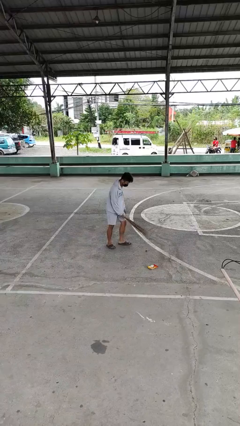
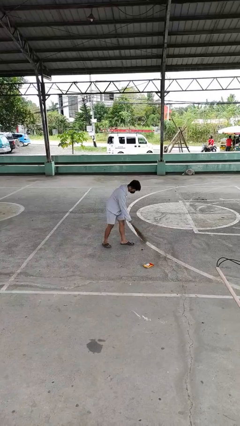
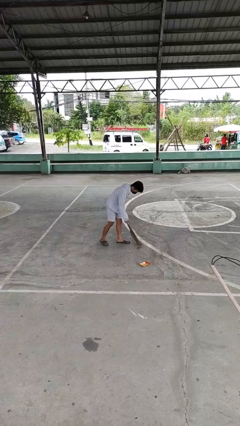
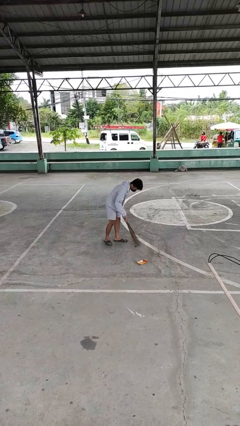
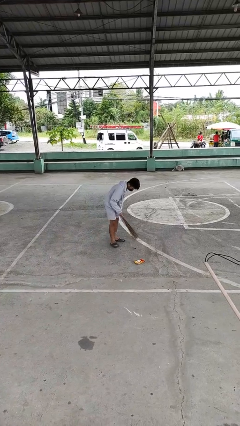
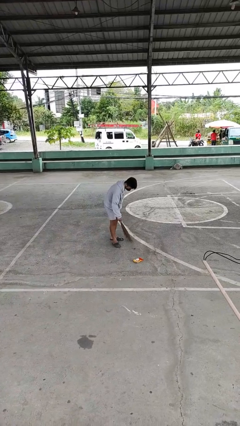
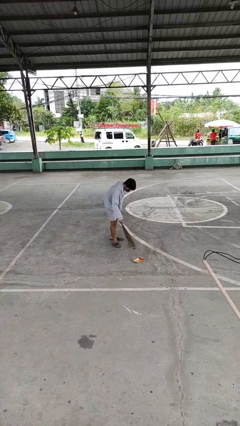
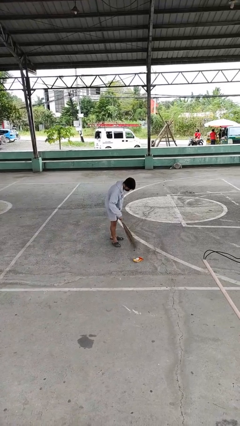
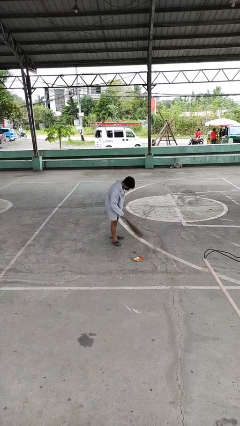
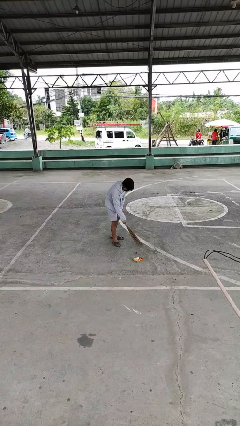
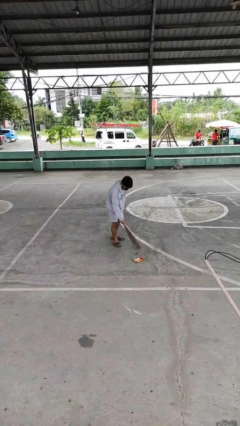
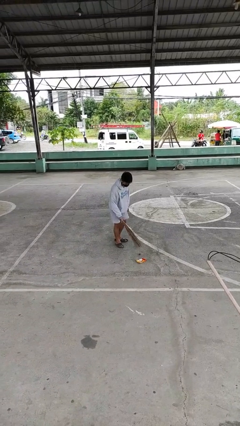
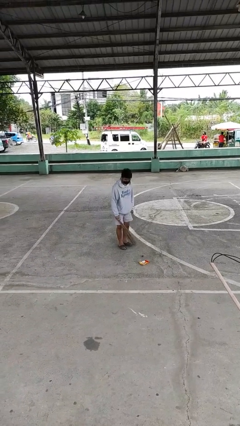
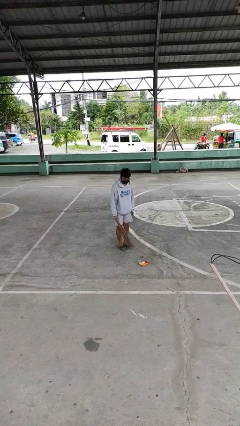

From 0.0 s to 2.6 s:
person sweeps floor

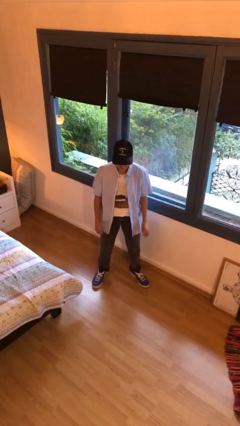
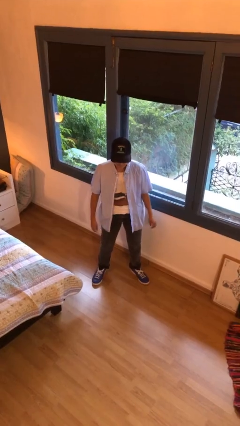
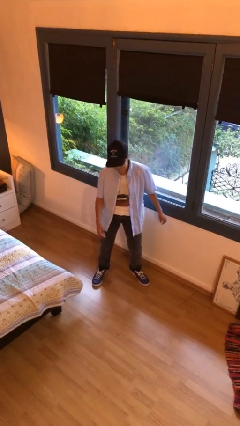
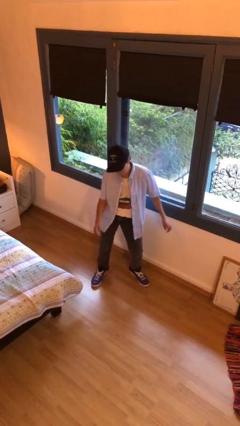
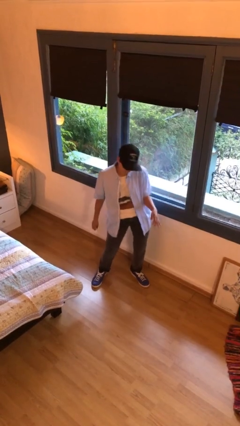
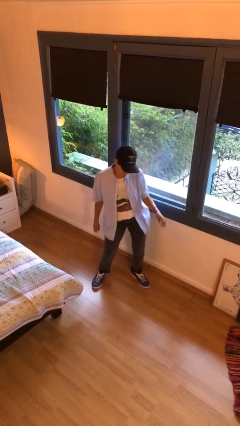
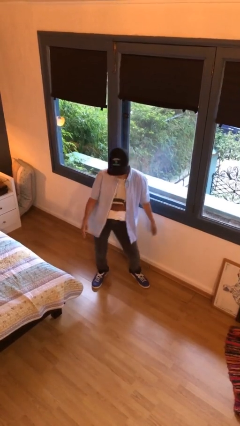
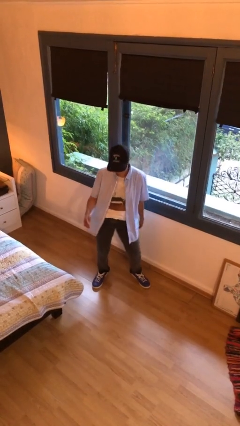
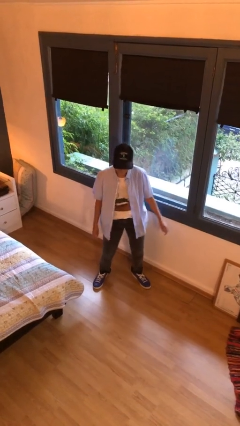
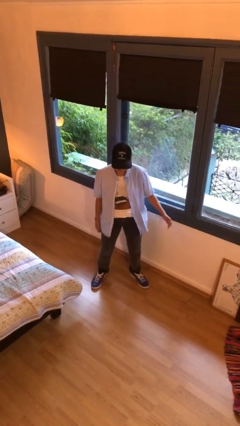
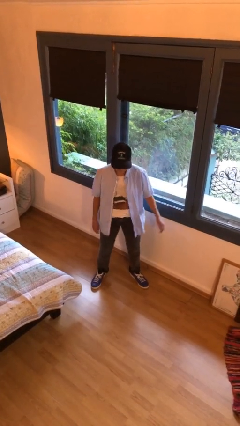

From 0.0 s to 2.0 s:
person wiggles hips

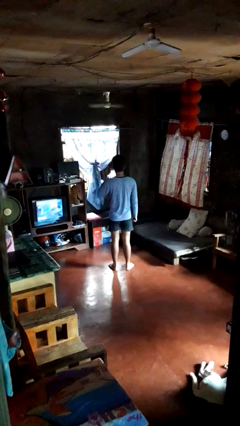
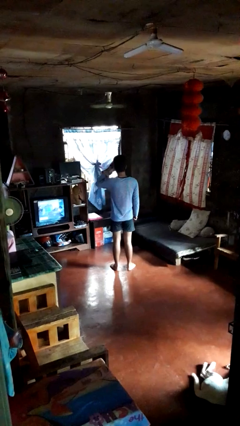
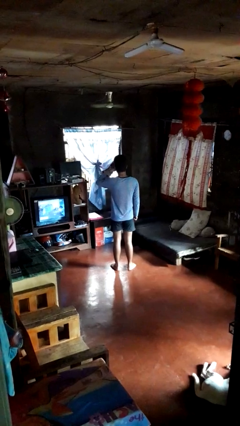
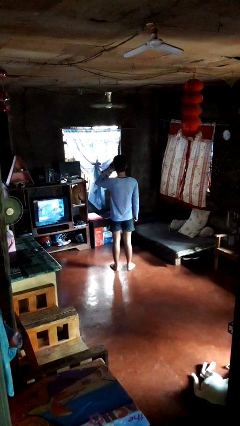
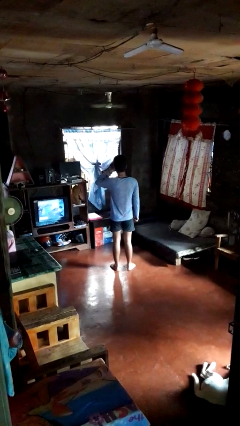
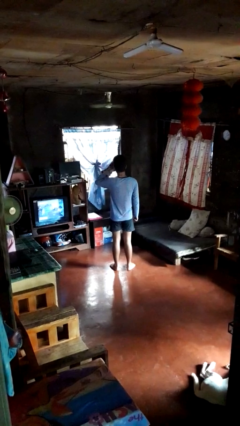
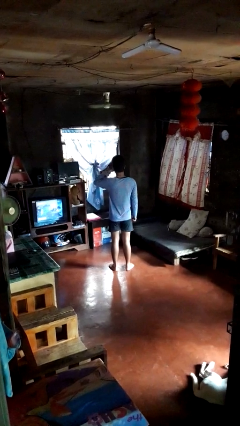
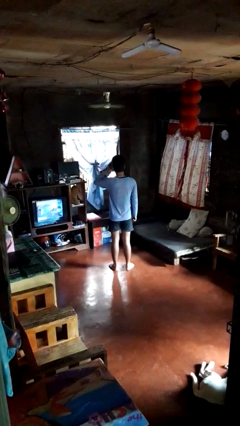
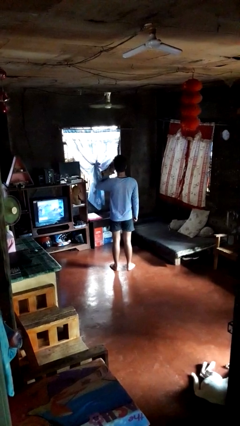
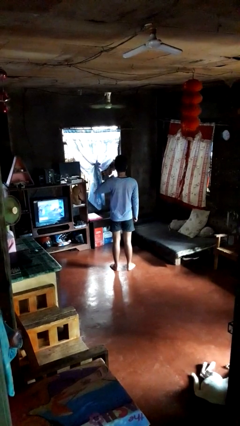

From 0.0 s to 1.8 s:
person gestures call me

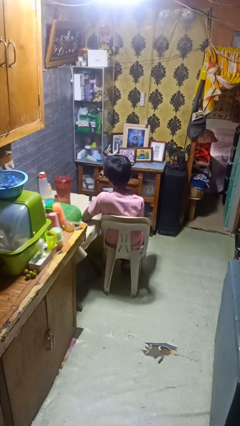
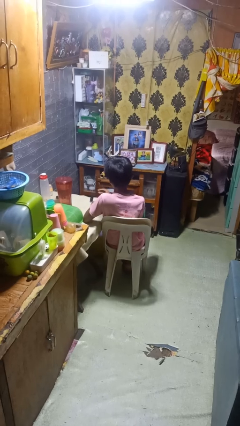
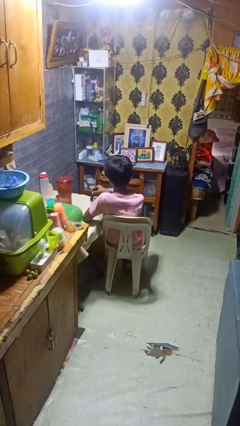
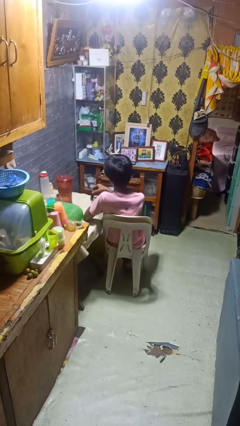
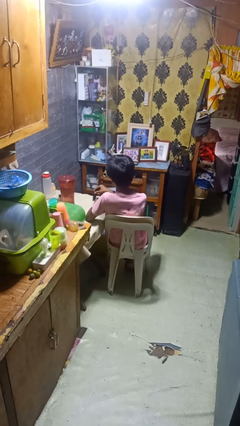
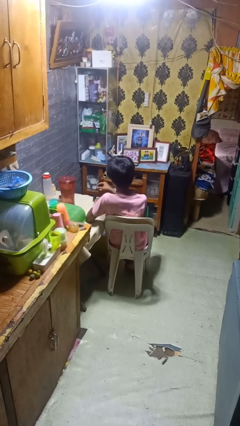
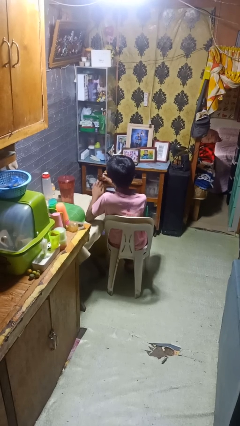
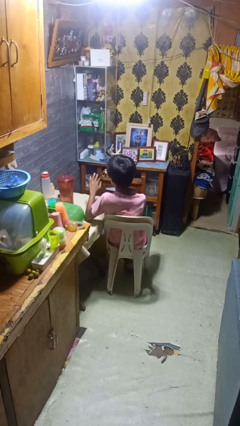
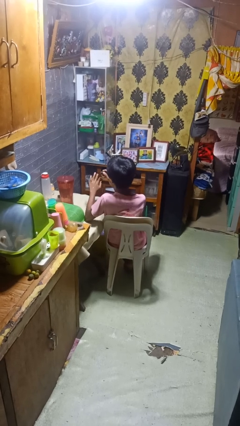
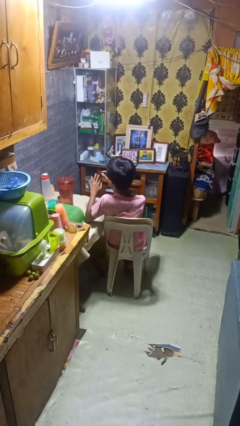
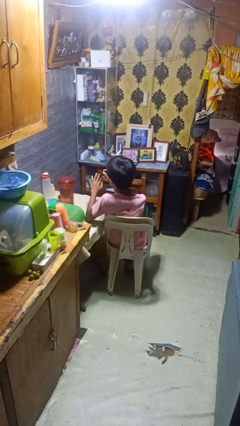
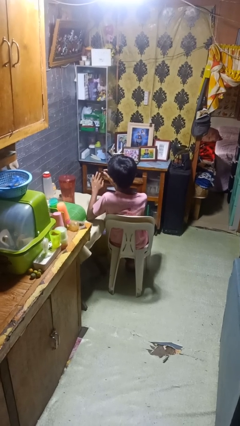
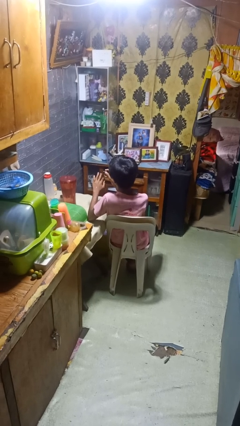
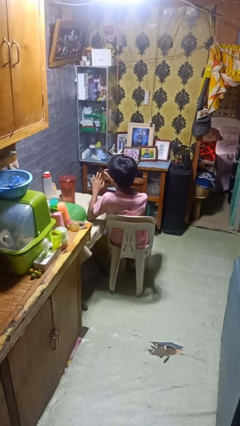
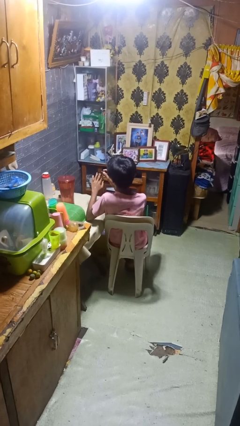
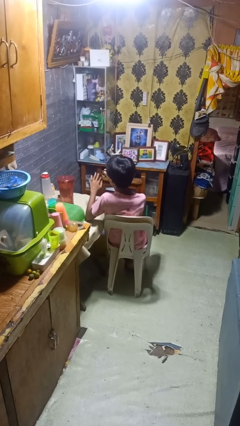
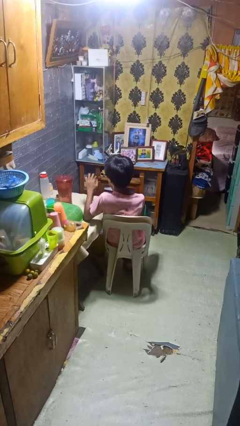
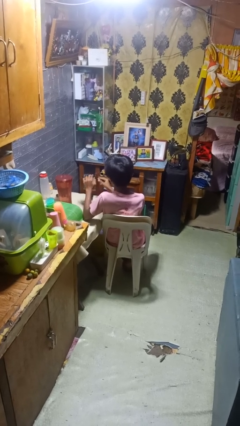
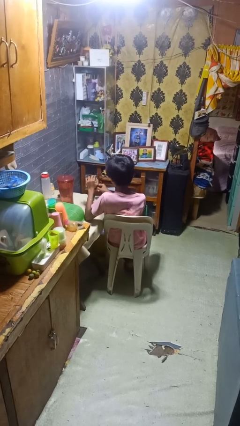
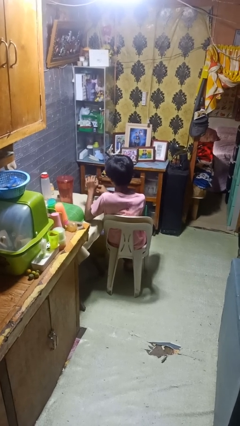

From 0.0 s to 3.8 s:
person paints fingernails

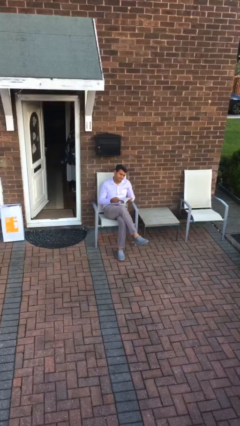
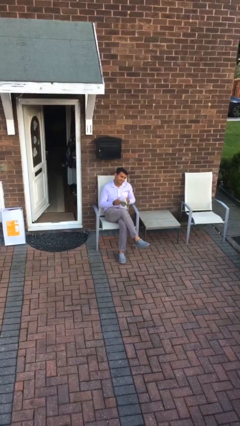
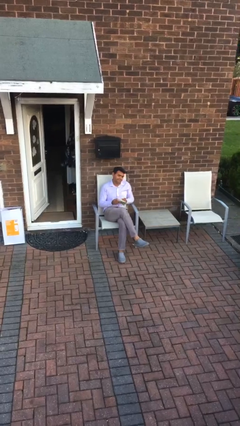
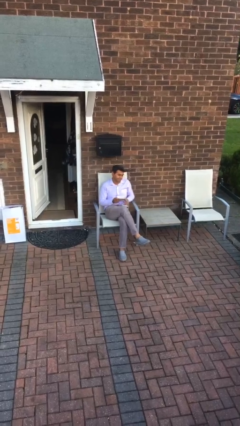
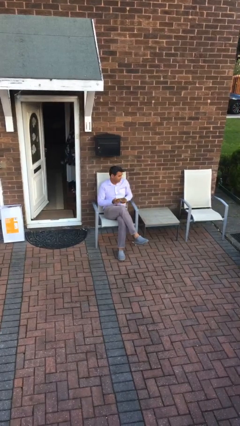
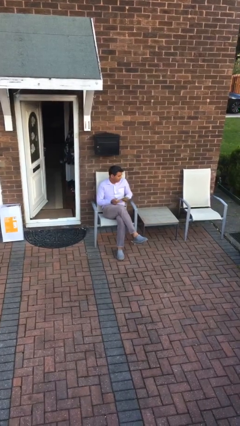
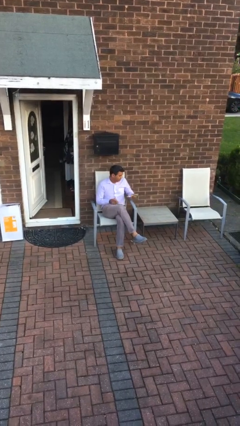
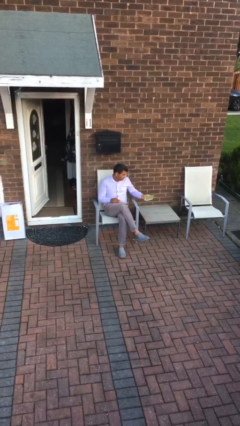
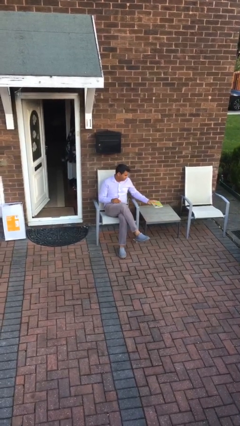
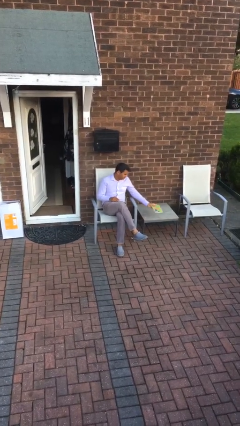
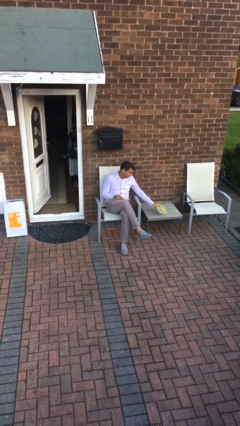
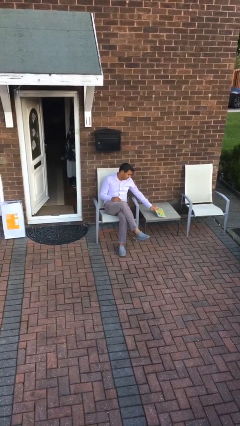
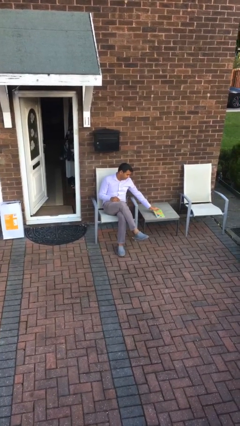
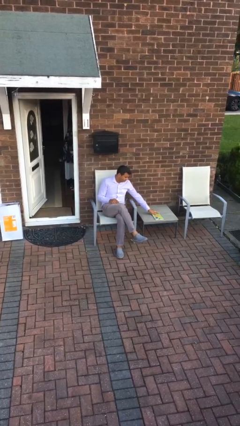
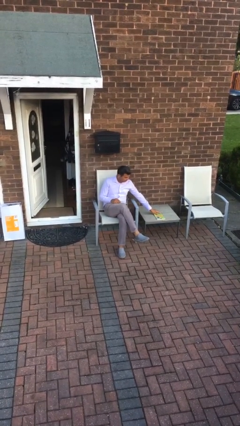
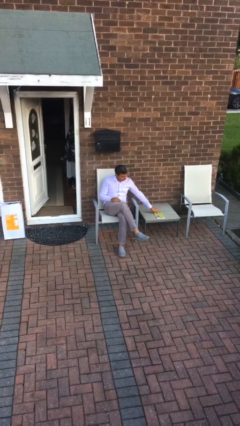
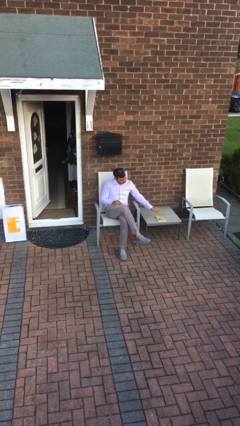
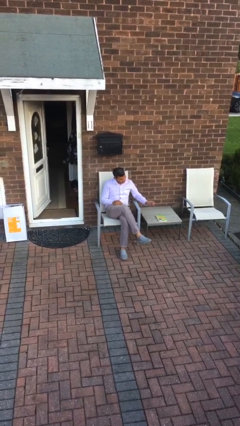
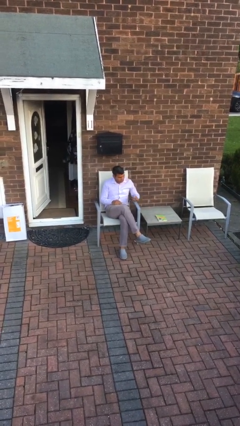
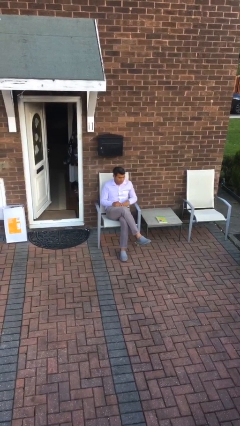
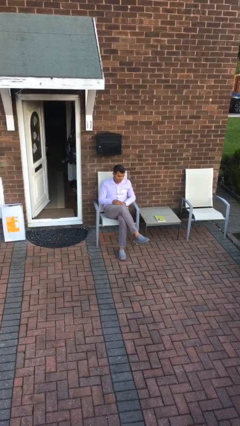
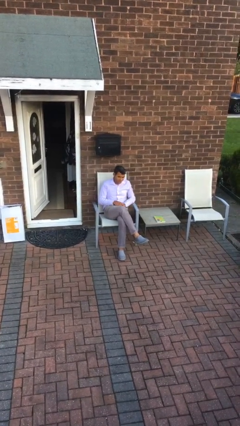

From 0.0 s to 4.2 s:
person puts down object on table

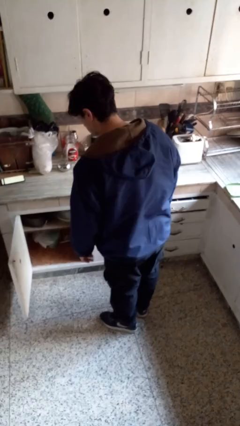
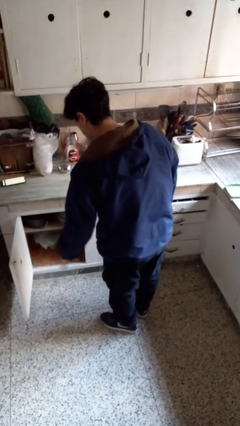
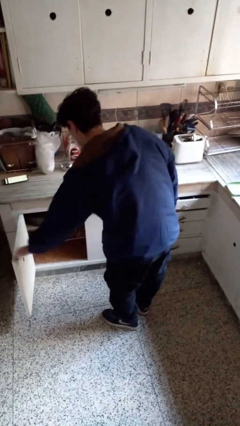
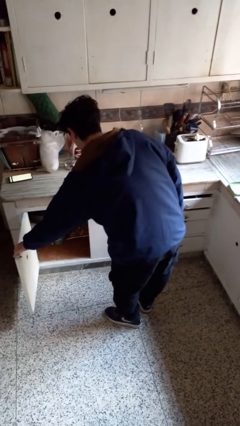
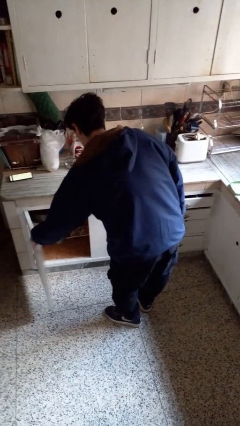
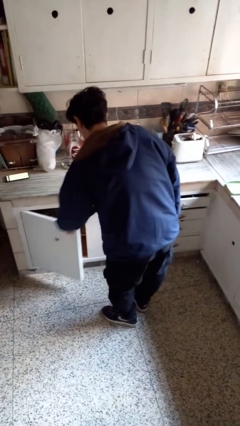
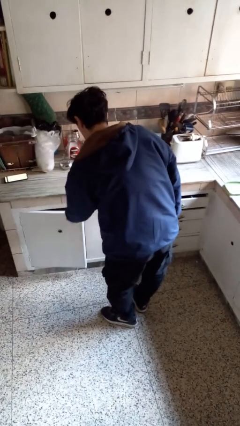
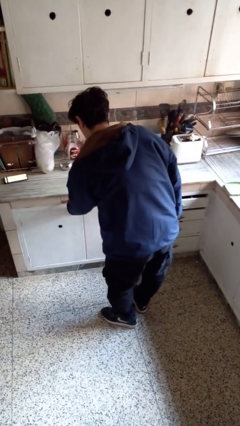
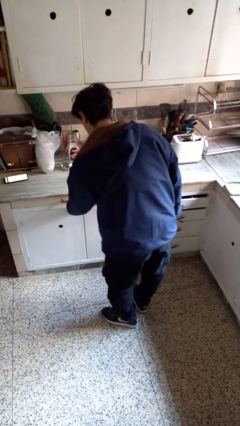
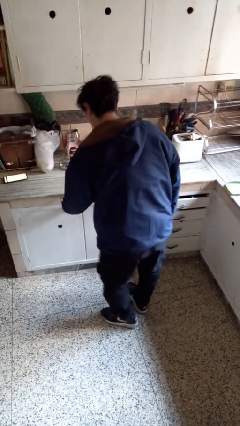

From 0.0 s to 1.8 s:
person closes cabinet

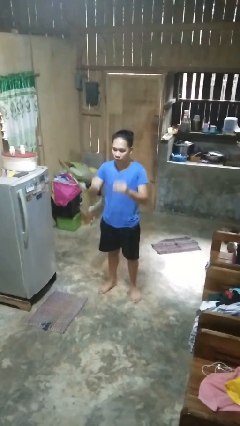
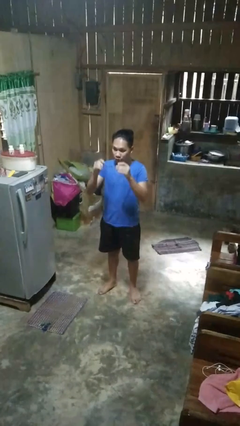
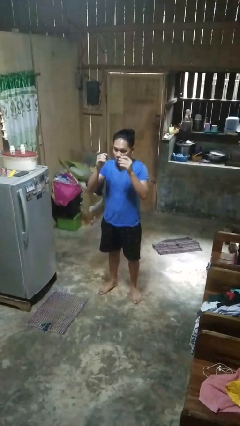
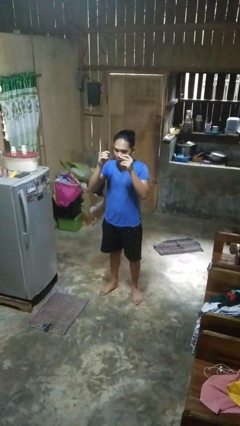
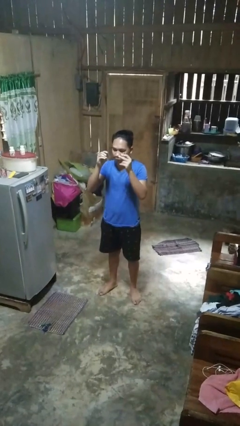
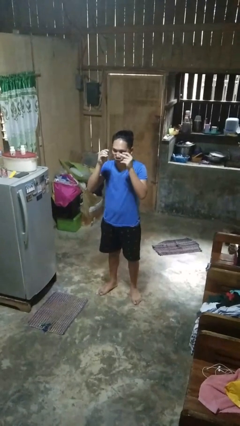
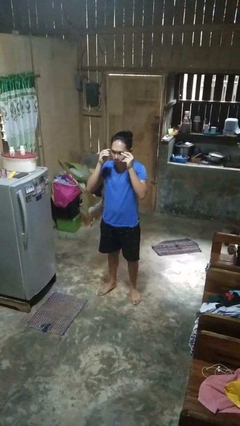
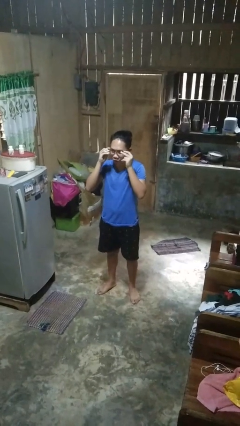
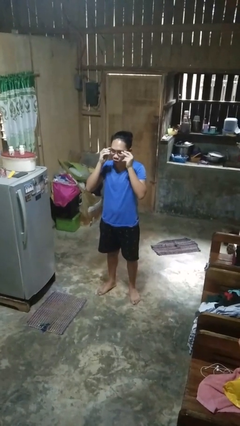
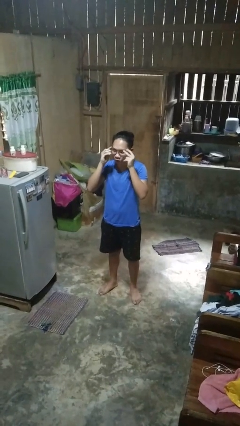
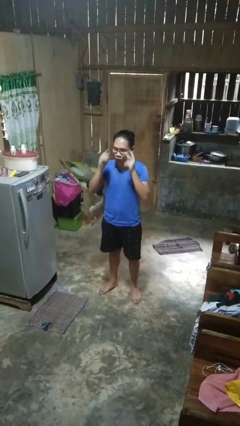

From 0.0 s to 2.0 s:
person puts on glasses
